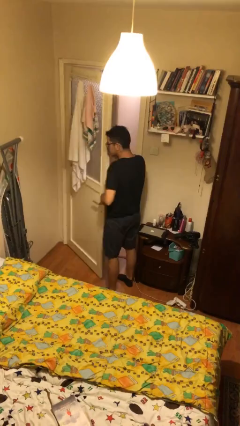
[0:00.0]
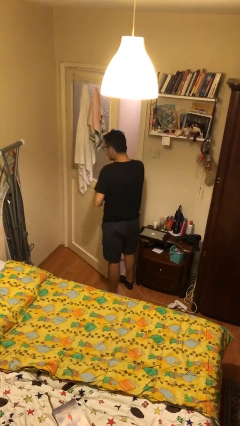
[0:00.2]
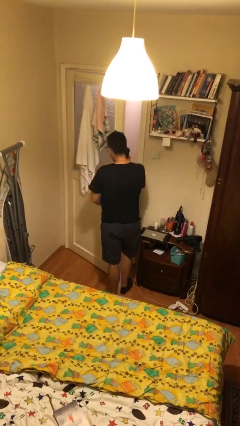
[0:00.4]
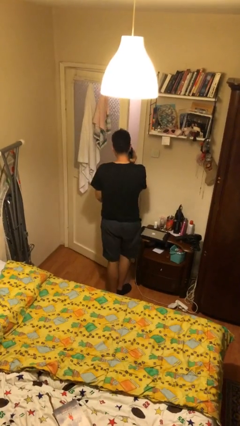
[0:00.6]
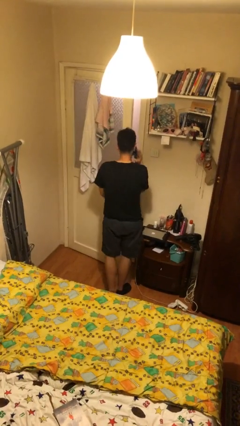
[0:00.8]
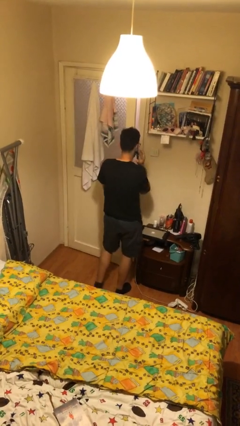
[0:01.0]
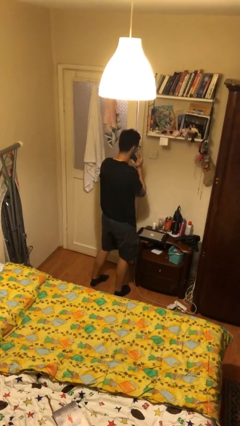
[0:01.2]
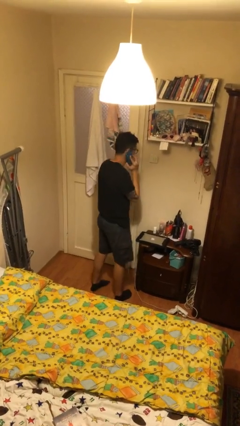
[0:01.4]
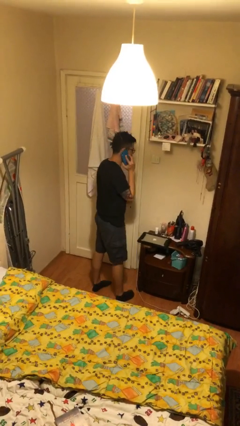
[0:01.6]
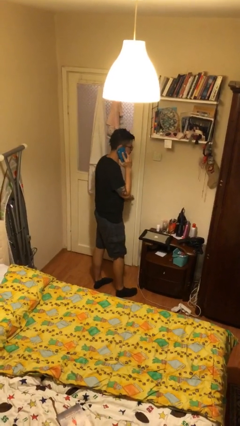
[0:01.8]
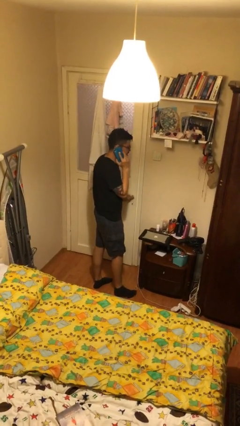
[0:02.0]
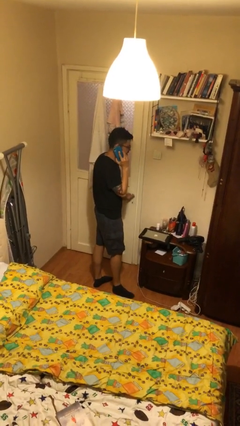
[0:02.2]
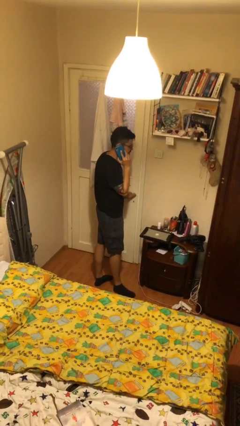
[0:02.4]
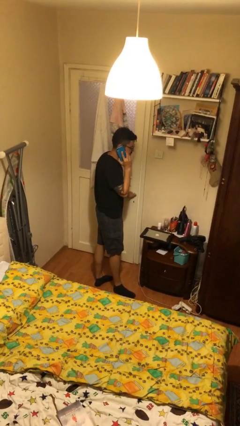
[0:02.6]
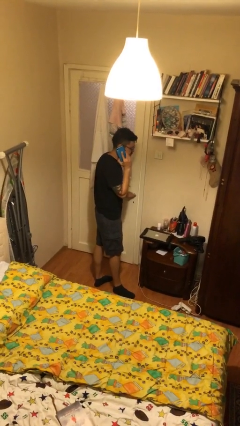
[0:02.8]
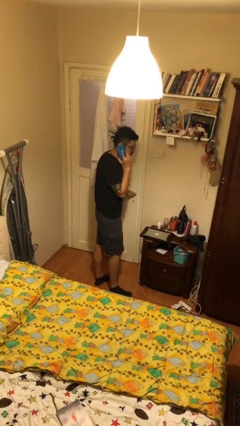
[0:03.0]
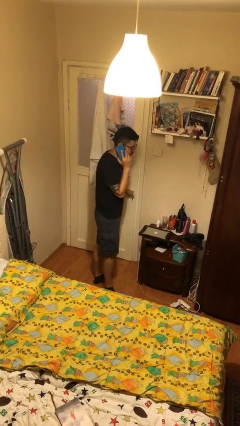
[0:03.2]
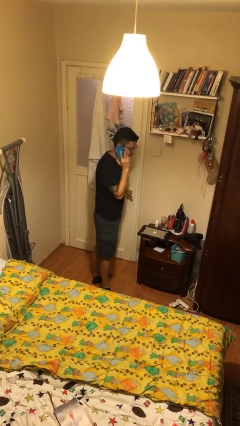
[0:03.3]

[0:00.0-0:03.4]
person closes facility door

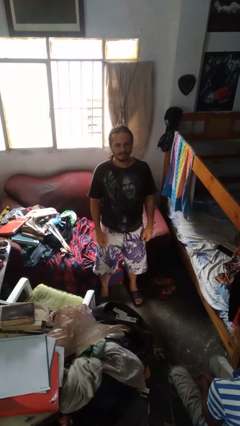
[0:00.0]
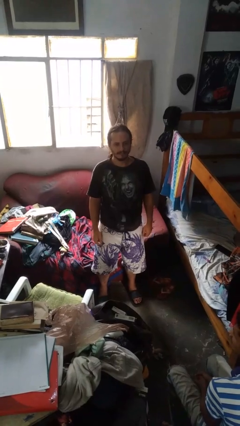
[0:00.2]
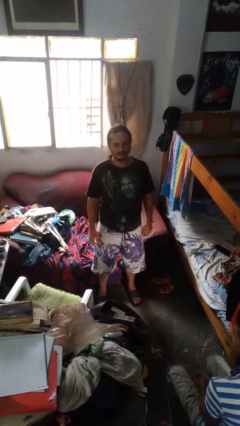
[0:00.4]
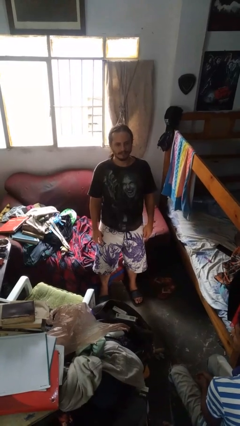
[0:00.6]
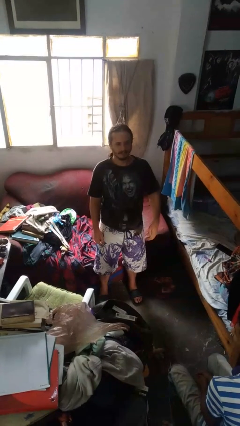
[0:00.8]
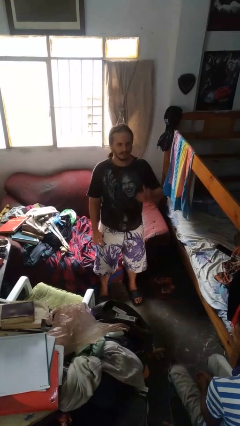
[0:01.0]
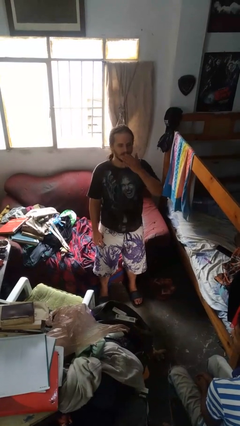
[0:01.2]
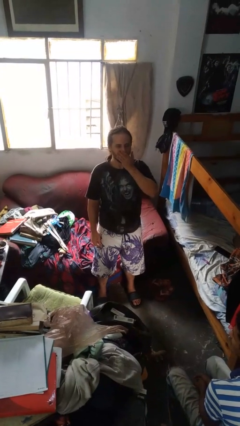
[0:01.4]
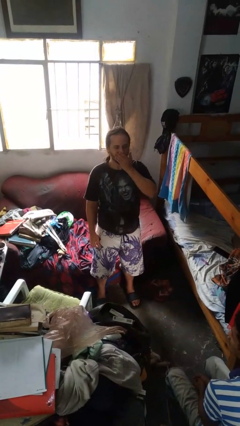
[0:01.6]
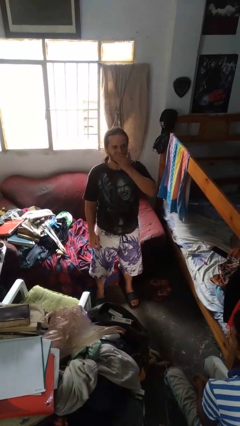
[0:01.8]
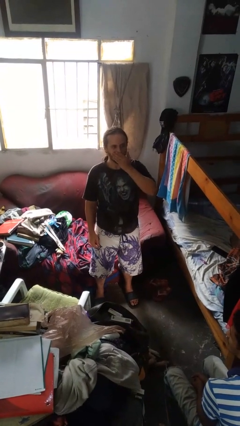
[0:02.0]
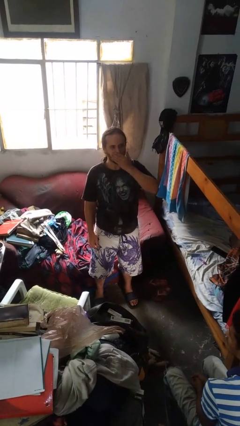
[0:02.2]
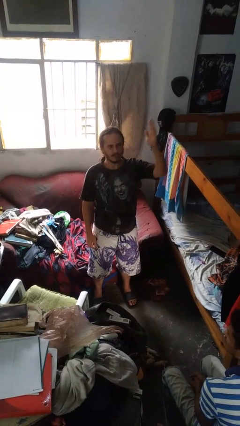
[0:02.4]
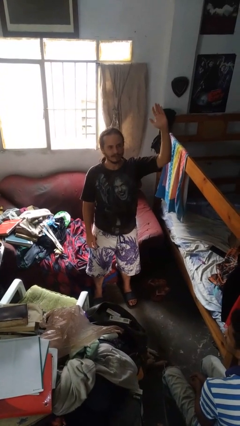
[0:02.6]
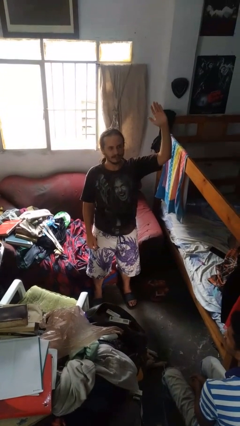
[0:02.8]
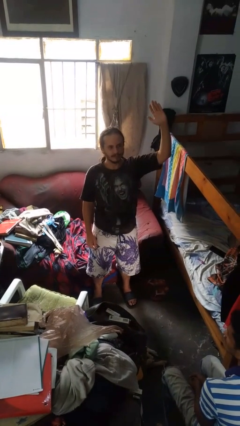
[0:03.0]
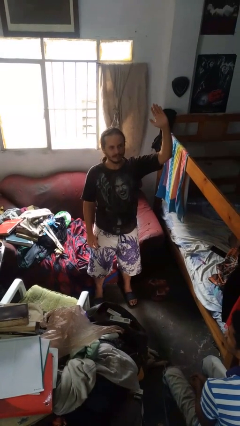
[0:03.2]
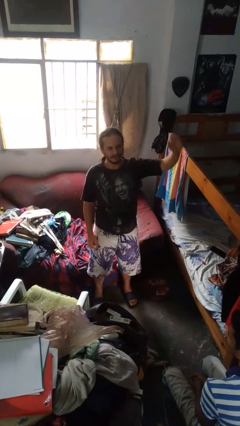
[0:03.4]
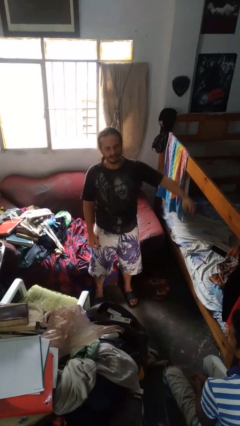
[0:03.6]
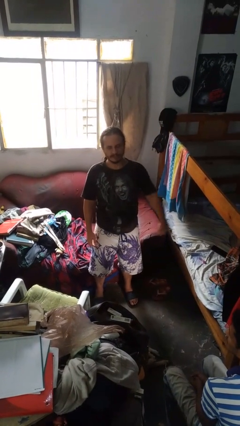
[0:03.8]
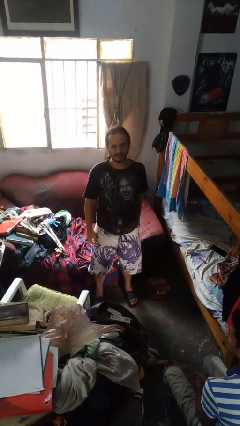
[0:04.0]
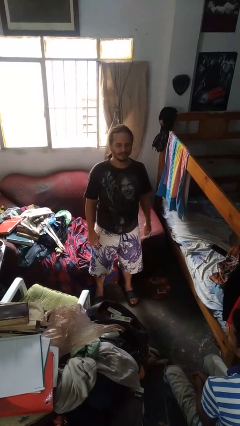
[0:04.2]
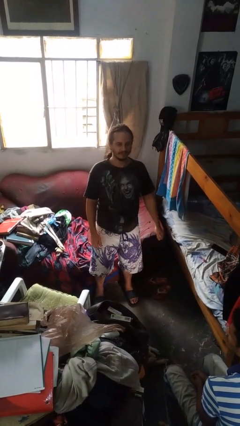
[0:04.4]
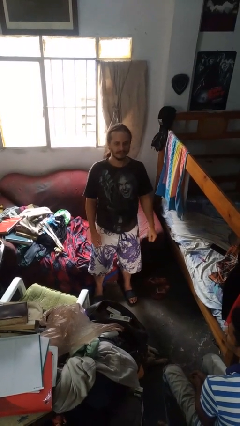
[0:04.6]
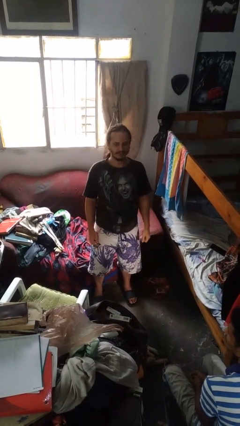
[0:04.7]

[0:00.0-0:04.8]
person gestures blow kiss

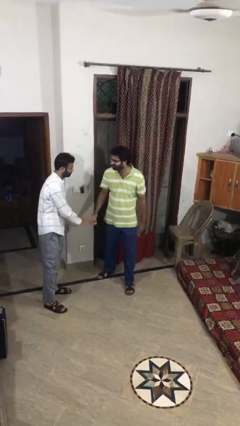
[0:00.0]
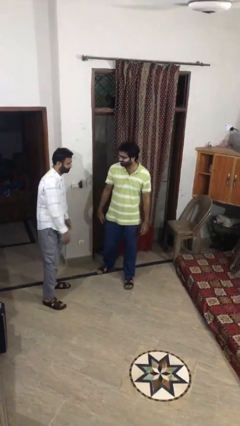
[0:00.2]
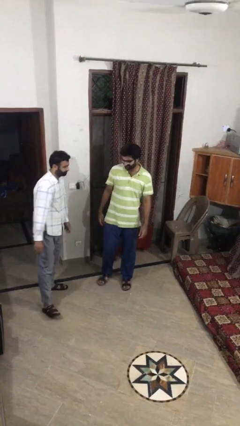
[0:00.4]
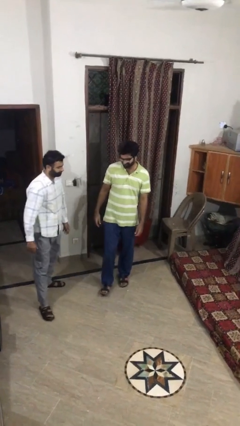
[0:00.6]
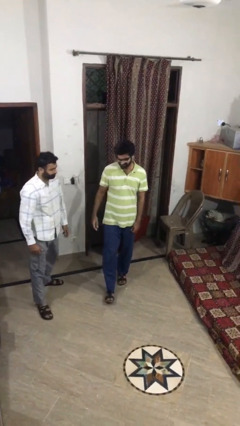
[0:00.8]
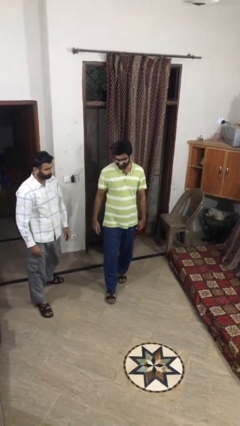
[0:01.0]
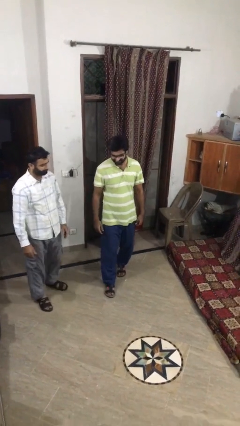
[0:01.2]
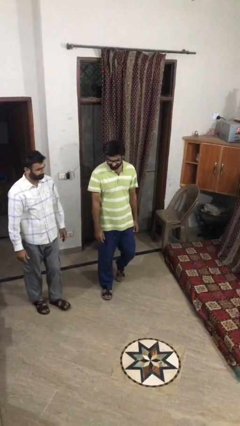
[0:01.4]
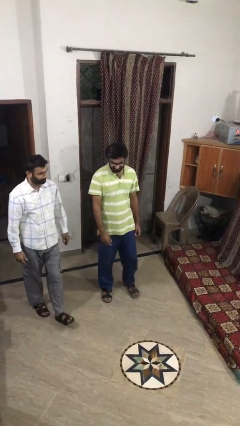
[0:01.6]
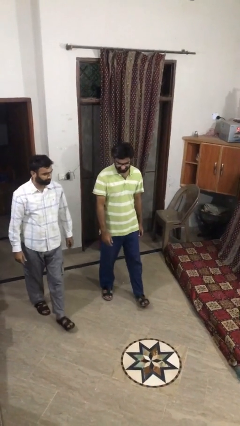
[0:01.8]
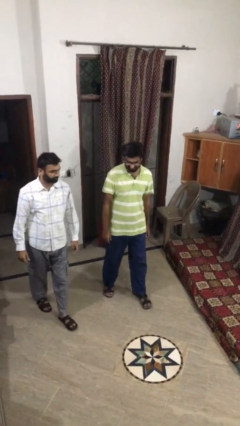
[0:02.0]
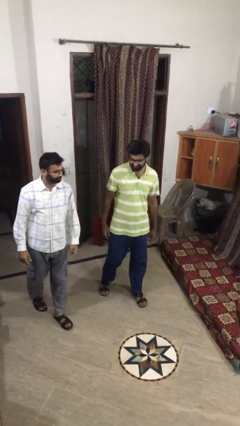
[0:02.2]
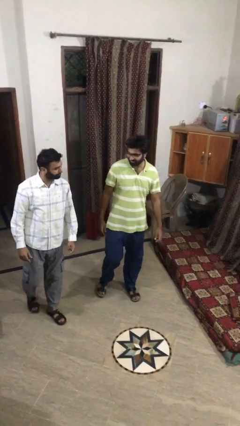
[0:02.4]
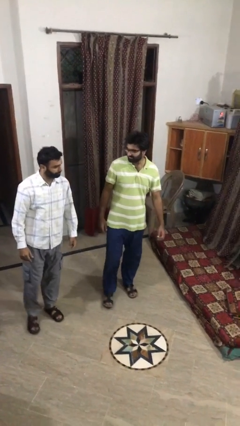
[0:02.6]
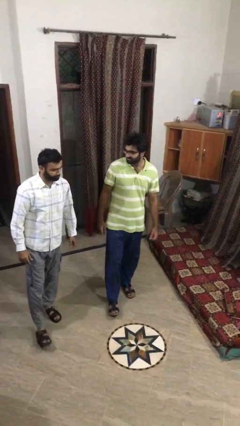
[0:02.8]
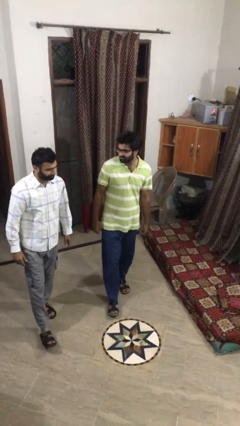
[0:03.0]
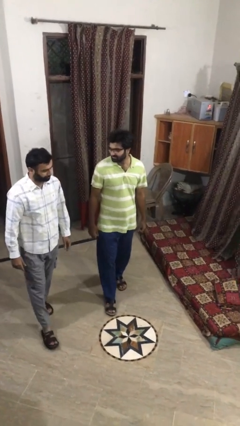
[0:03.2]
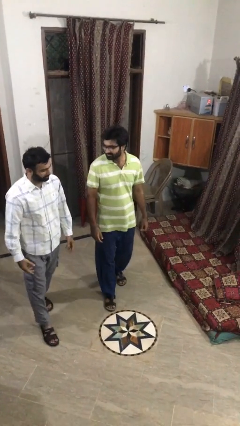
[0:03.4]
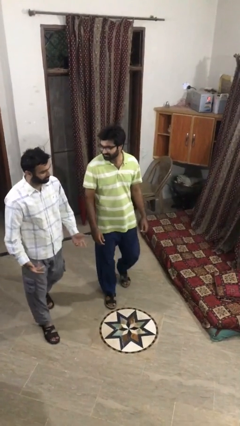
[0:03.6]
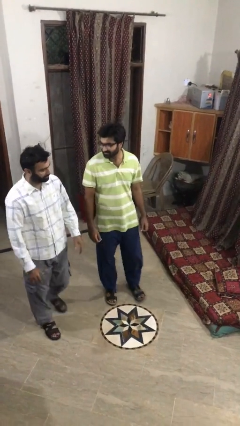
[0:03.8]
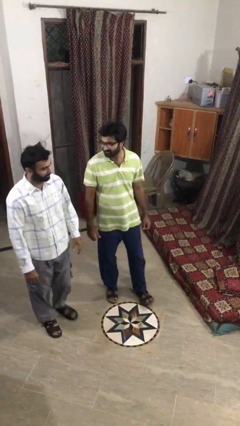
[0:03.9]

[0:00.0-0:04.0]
person talks to person

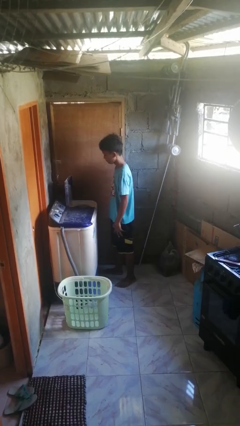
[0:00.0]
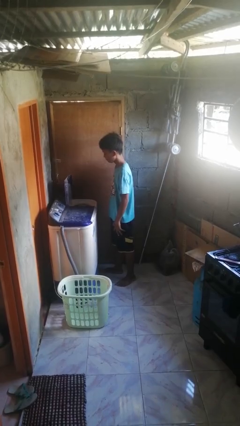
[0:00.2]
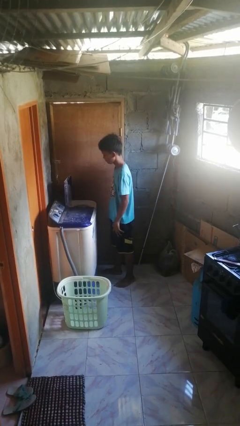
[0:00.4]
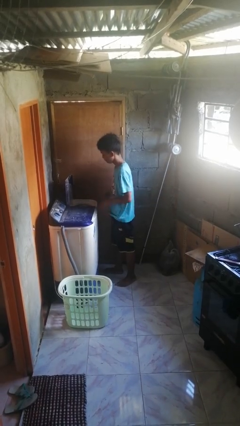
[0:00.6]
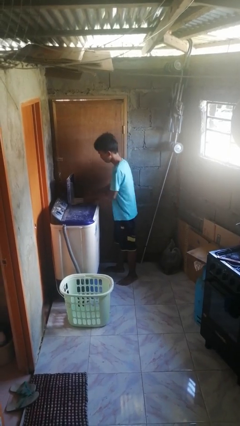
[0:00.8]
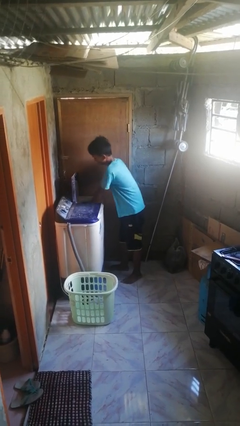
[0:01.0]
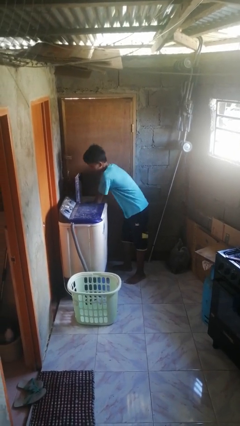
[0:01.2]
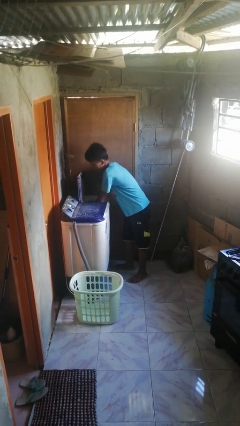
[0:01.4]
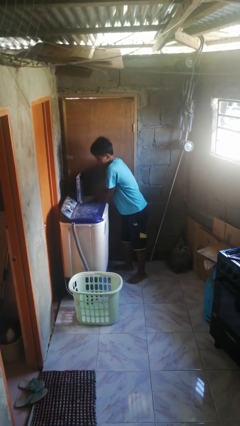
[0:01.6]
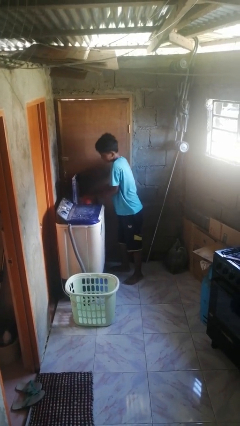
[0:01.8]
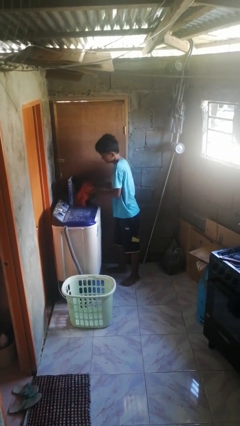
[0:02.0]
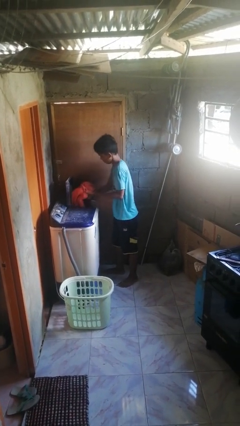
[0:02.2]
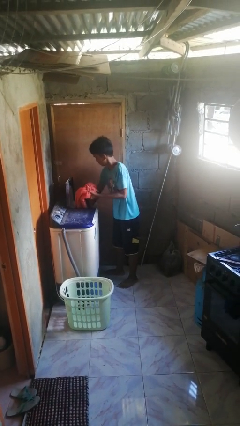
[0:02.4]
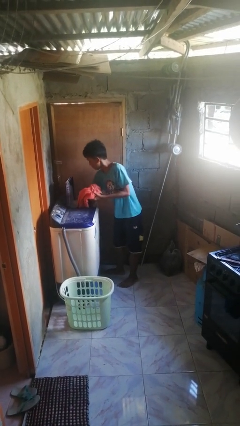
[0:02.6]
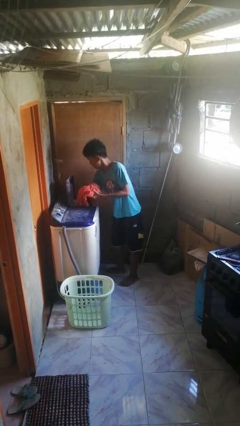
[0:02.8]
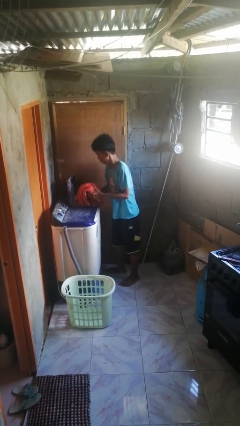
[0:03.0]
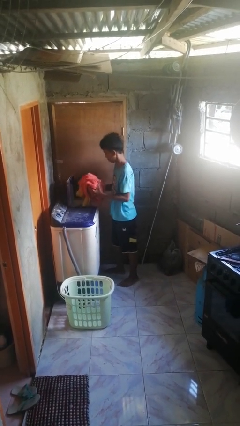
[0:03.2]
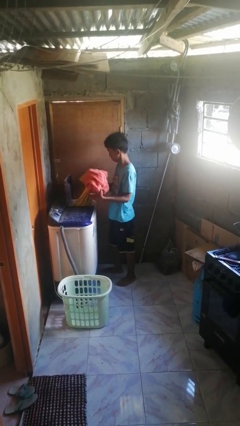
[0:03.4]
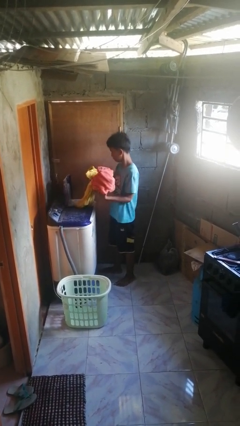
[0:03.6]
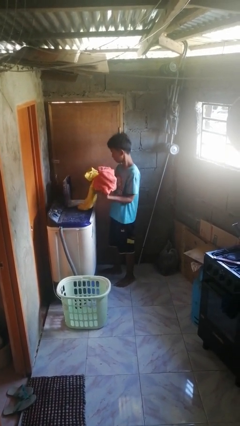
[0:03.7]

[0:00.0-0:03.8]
person unloads dryer

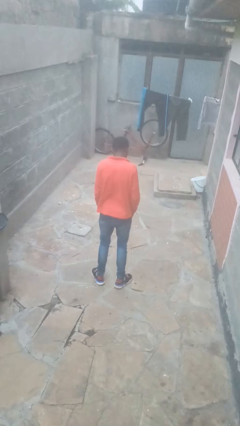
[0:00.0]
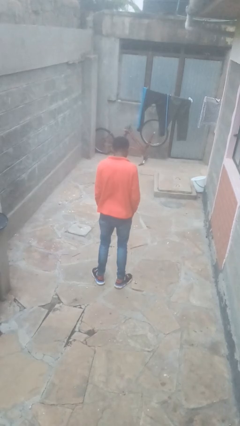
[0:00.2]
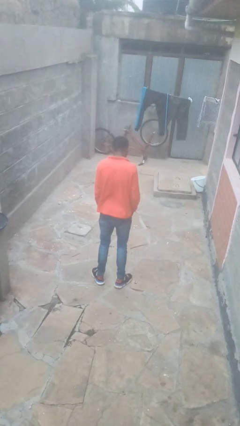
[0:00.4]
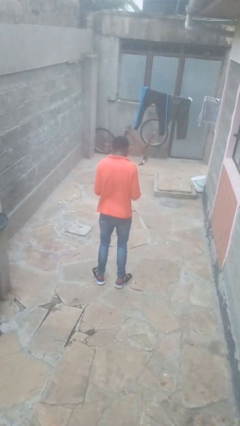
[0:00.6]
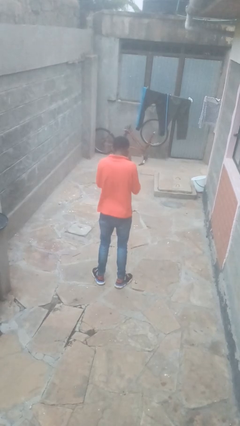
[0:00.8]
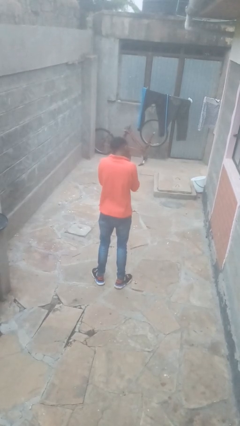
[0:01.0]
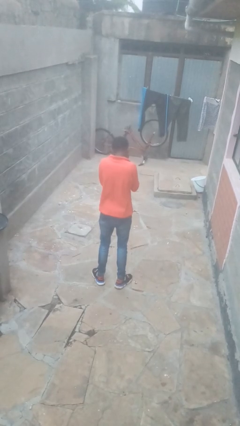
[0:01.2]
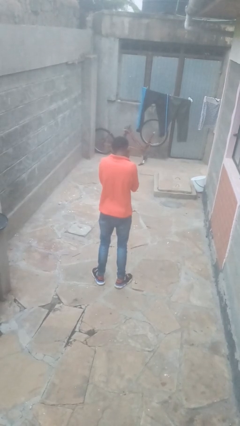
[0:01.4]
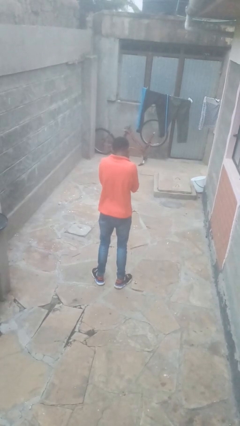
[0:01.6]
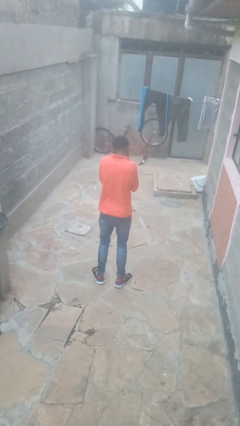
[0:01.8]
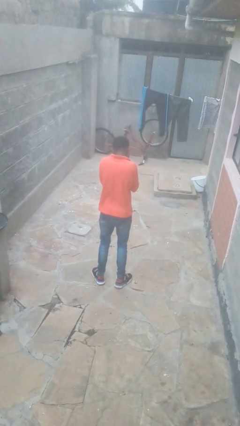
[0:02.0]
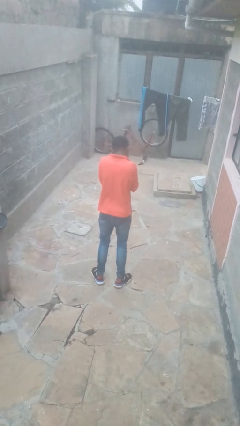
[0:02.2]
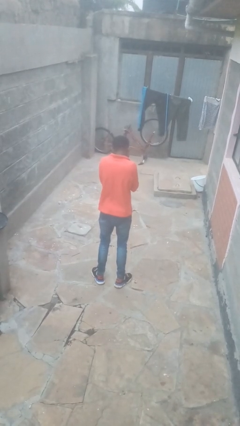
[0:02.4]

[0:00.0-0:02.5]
person covers face with hands
